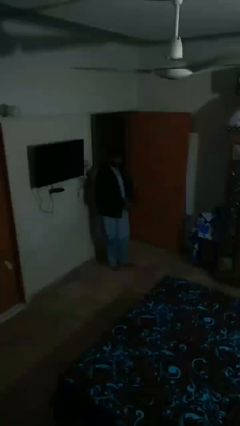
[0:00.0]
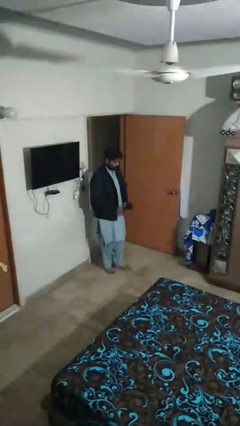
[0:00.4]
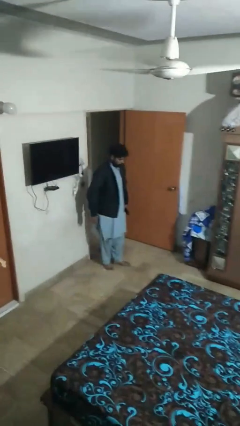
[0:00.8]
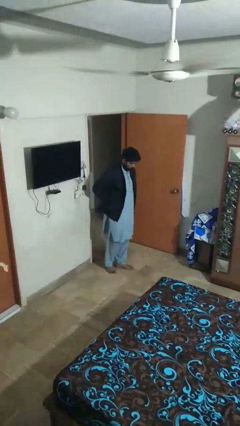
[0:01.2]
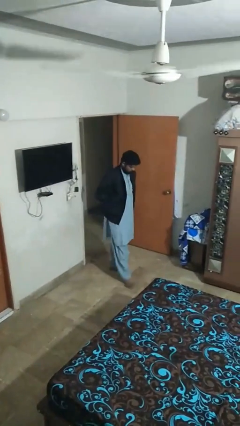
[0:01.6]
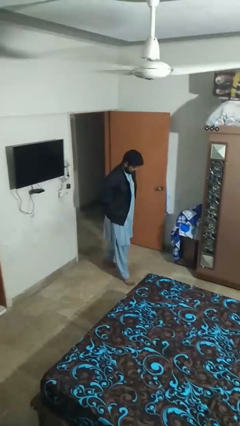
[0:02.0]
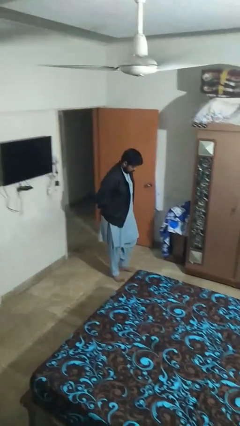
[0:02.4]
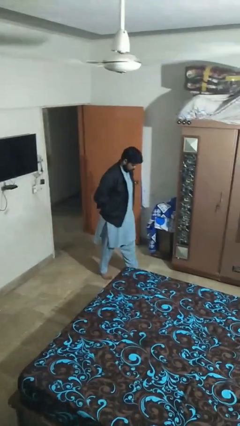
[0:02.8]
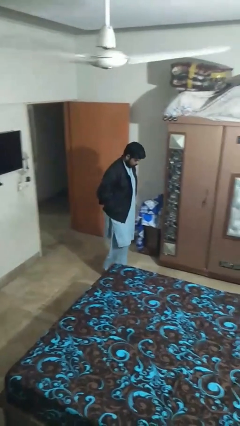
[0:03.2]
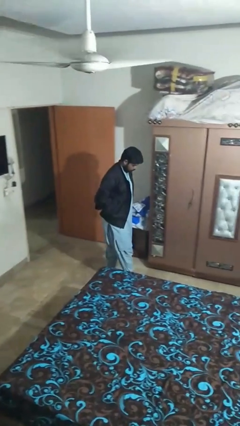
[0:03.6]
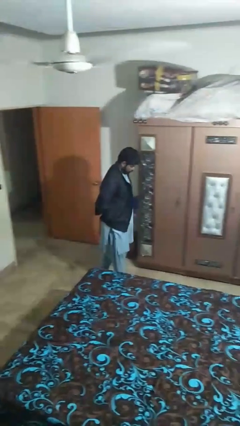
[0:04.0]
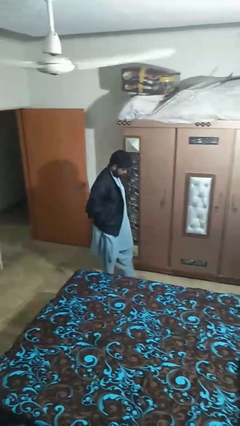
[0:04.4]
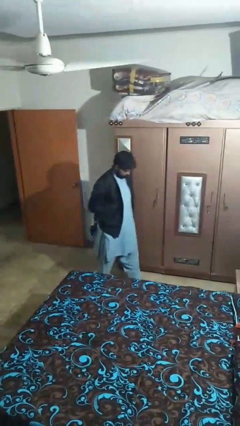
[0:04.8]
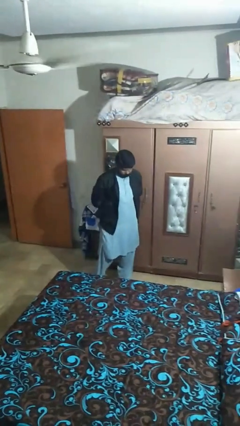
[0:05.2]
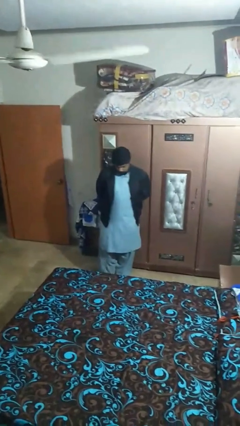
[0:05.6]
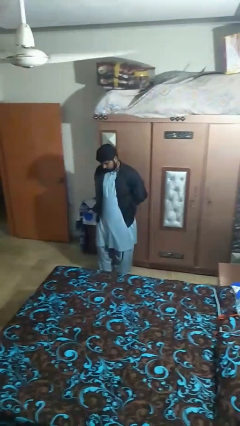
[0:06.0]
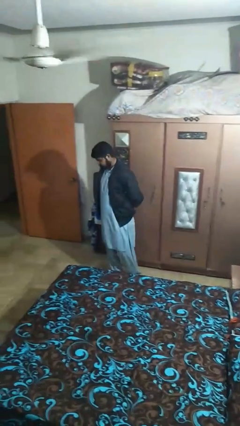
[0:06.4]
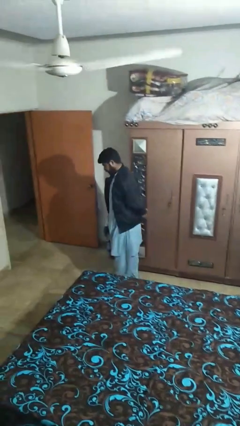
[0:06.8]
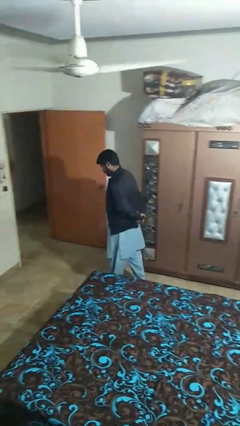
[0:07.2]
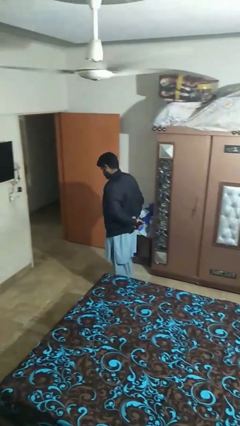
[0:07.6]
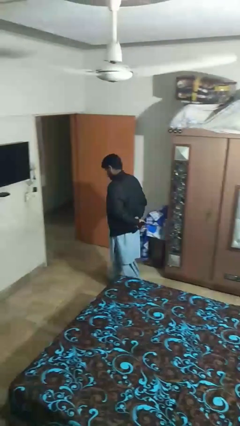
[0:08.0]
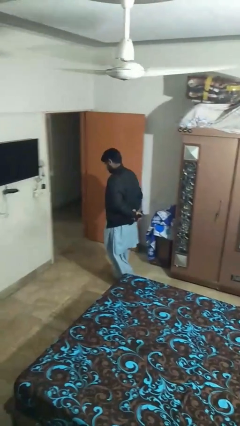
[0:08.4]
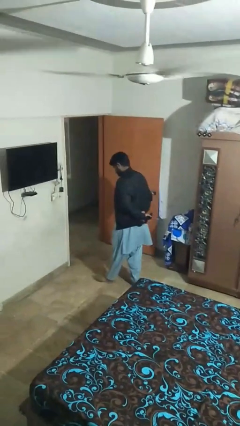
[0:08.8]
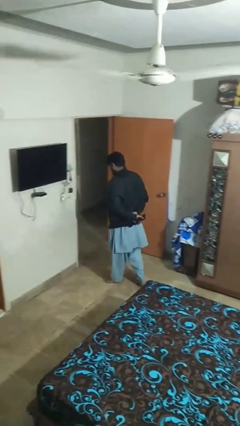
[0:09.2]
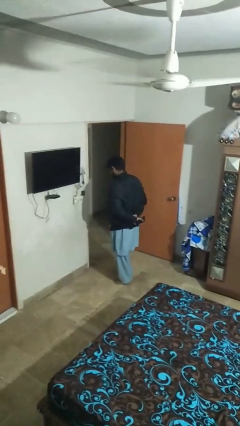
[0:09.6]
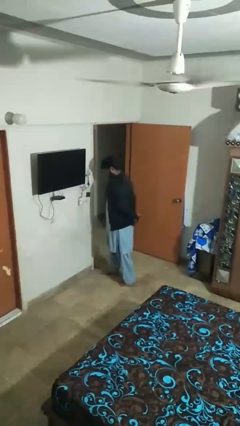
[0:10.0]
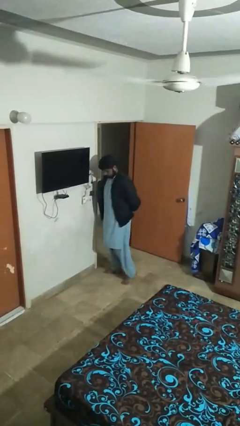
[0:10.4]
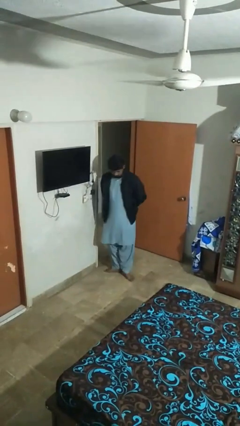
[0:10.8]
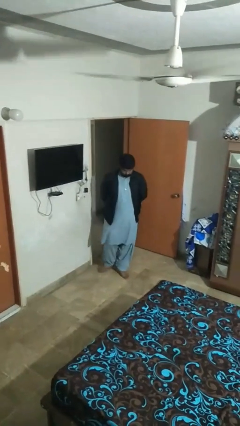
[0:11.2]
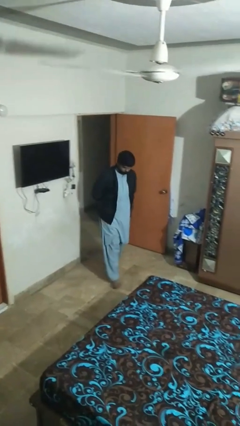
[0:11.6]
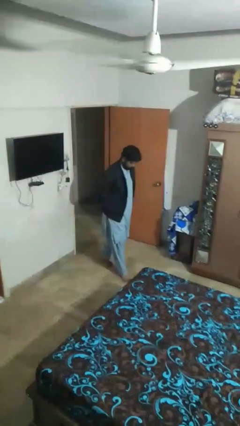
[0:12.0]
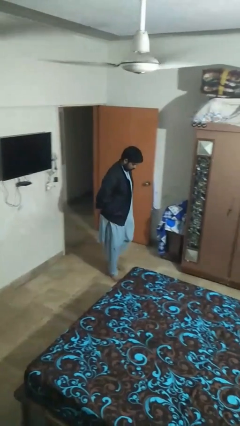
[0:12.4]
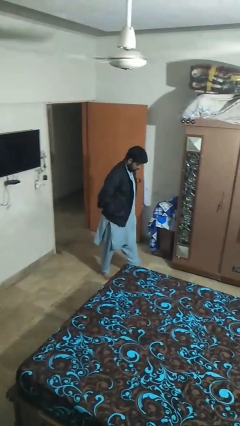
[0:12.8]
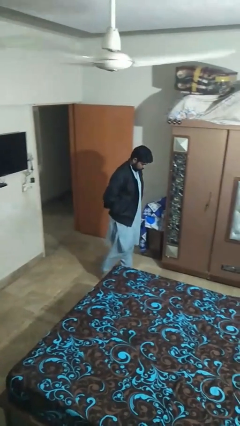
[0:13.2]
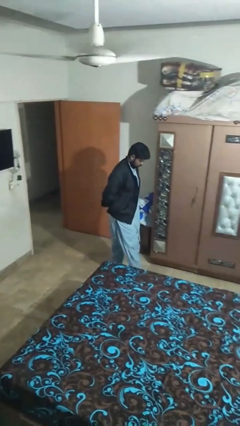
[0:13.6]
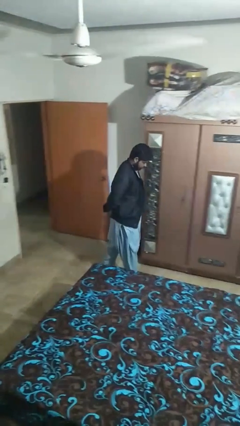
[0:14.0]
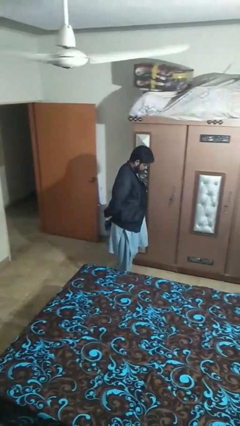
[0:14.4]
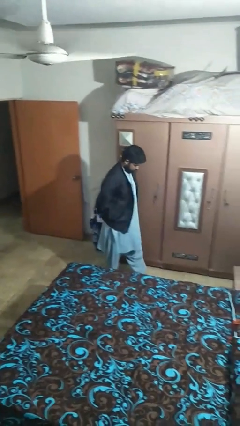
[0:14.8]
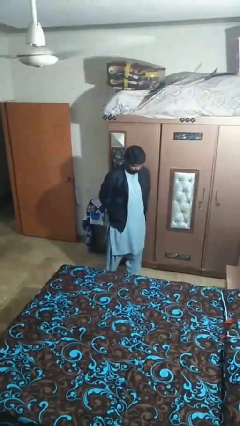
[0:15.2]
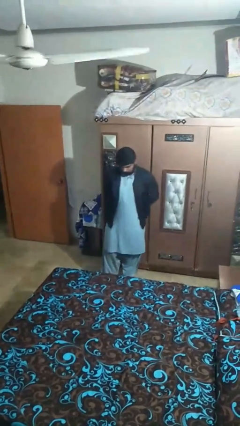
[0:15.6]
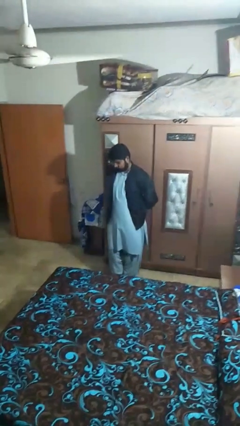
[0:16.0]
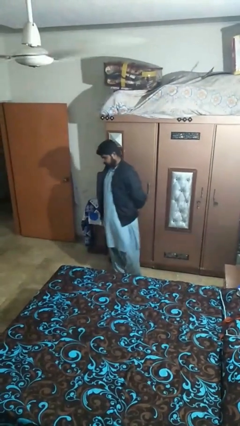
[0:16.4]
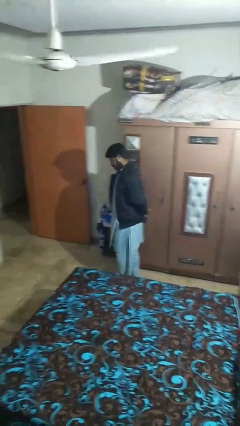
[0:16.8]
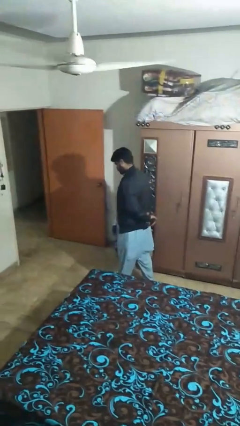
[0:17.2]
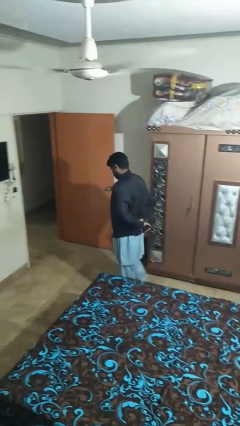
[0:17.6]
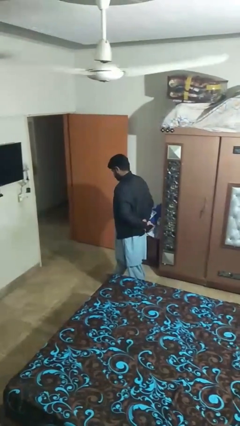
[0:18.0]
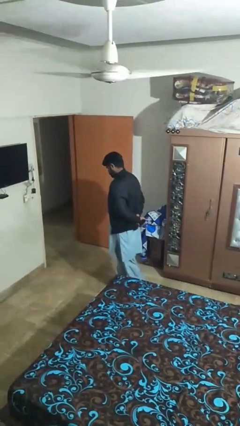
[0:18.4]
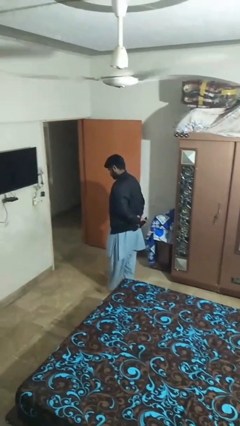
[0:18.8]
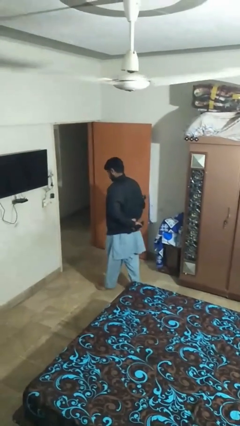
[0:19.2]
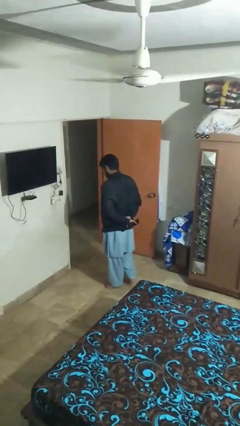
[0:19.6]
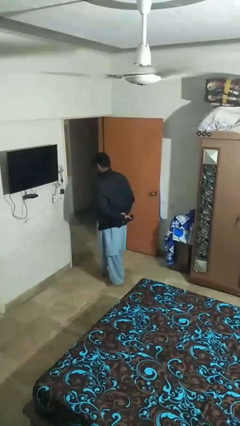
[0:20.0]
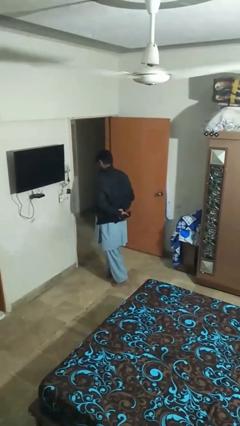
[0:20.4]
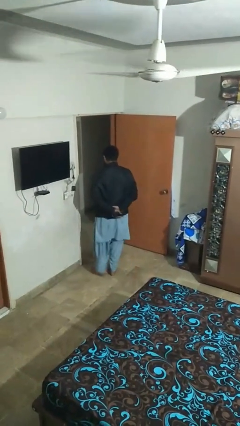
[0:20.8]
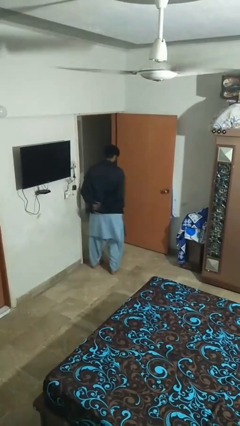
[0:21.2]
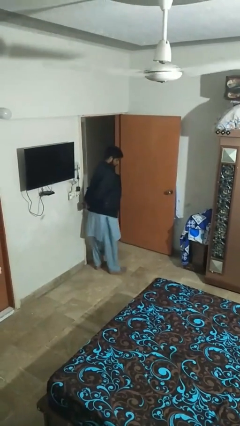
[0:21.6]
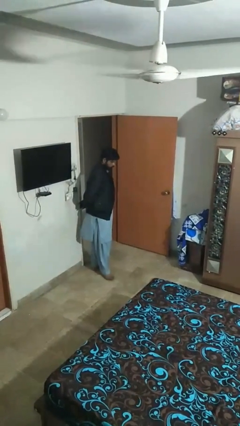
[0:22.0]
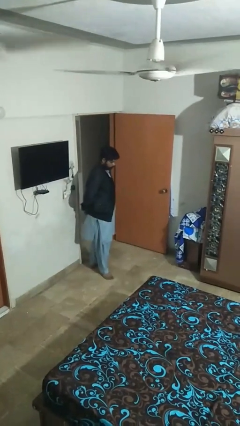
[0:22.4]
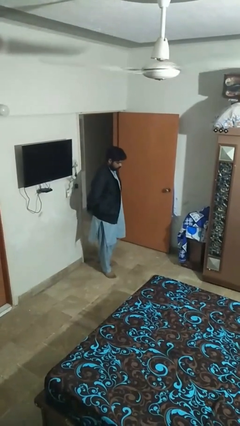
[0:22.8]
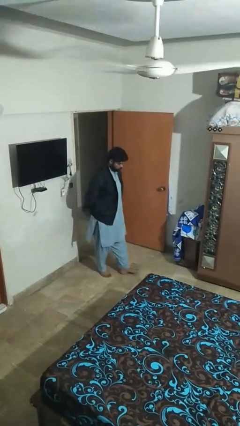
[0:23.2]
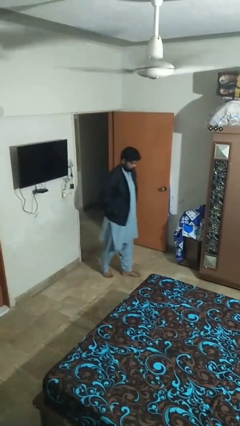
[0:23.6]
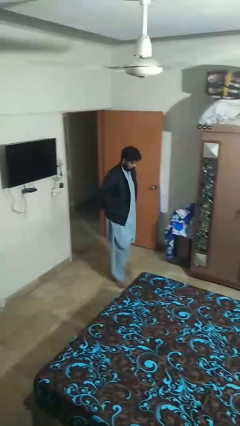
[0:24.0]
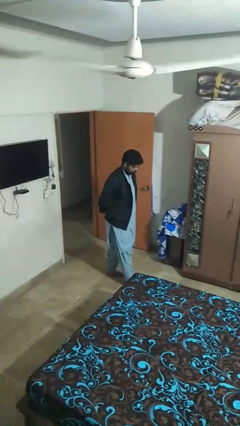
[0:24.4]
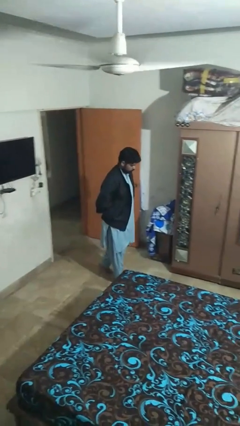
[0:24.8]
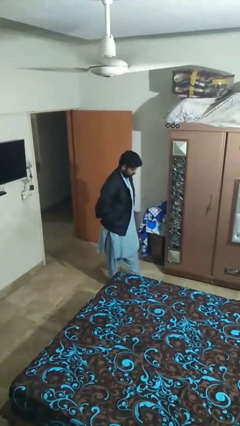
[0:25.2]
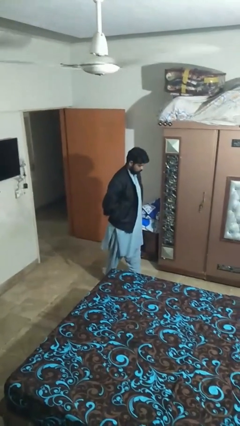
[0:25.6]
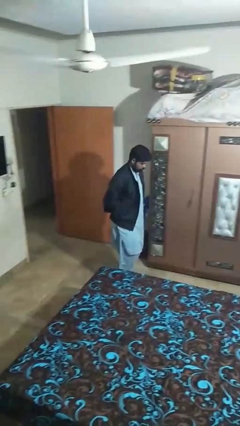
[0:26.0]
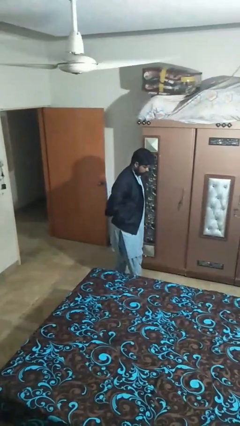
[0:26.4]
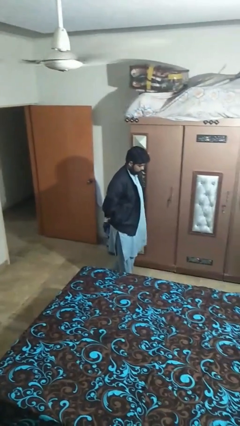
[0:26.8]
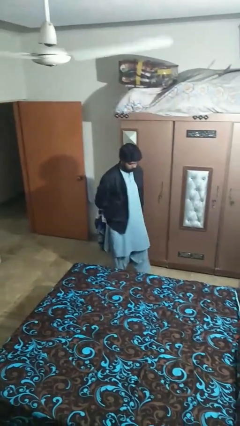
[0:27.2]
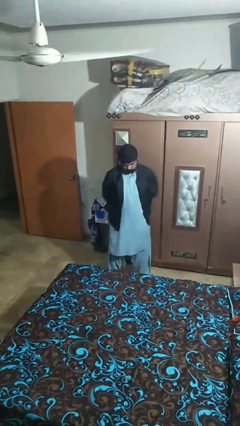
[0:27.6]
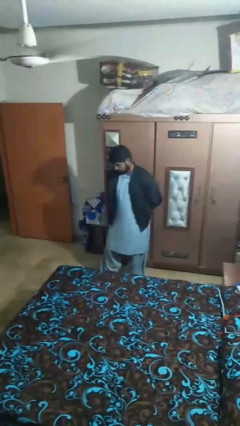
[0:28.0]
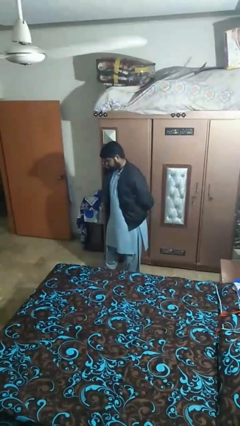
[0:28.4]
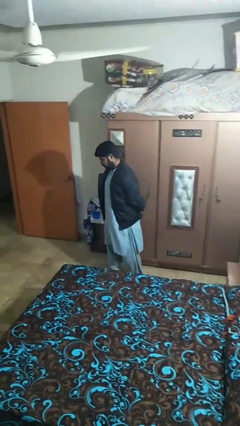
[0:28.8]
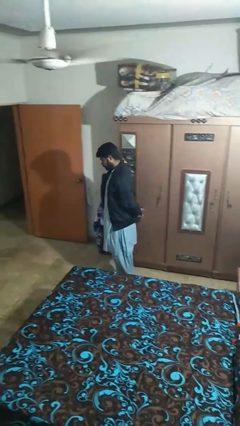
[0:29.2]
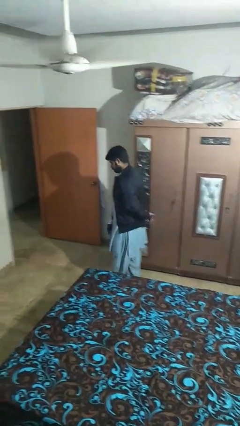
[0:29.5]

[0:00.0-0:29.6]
person walks

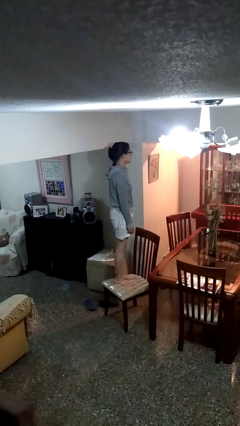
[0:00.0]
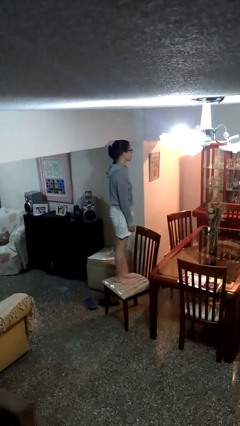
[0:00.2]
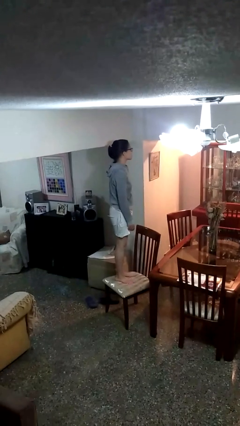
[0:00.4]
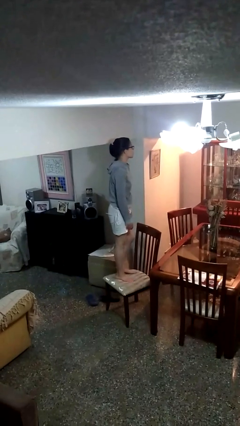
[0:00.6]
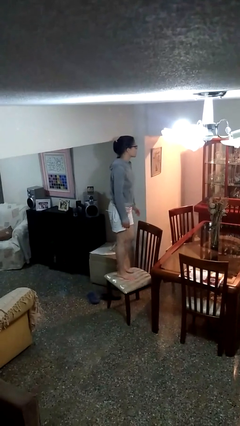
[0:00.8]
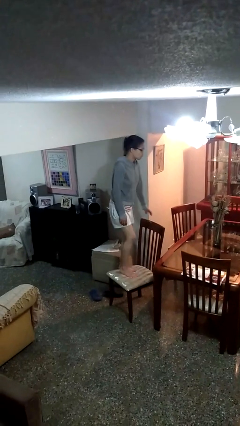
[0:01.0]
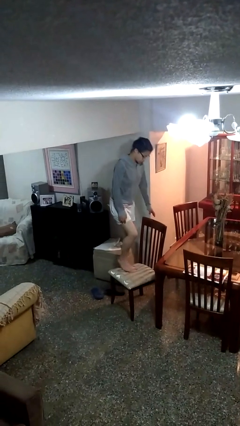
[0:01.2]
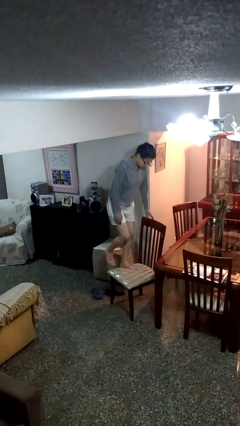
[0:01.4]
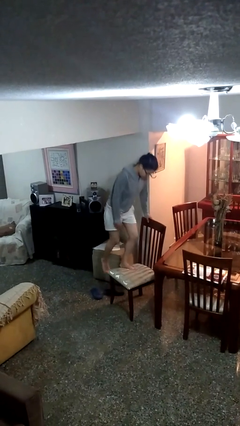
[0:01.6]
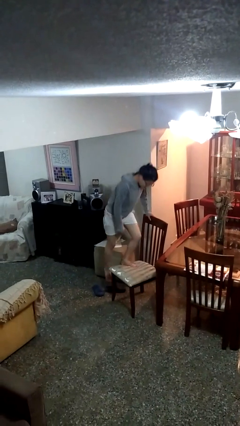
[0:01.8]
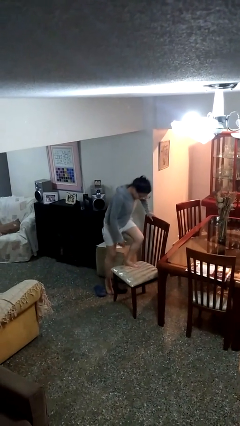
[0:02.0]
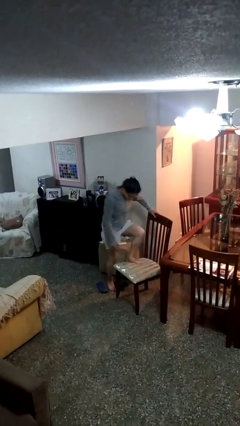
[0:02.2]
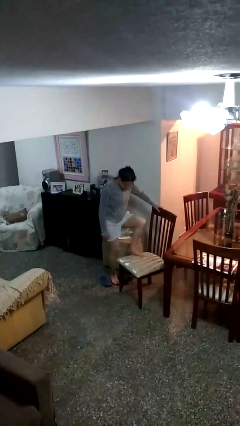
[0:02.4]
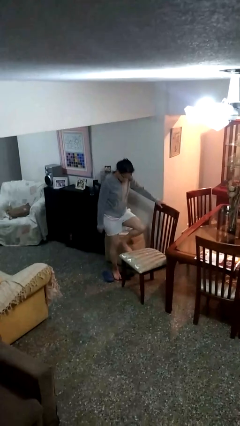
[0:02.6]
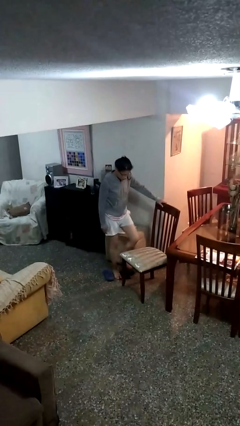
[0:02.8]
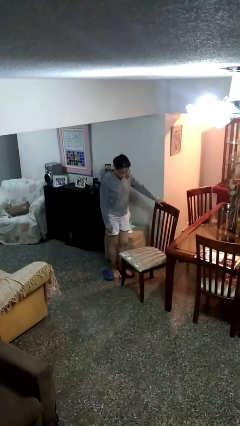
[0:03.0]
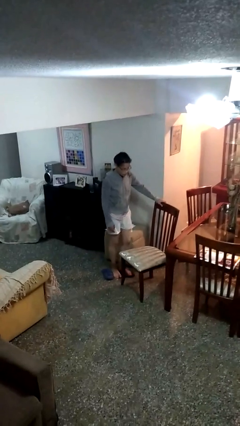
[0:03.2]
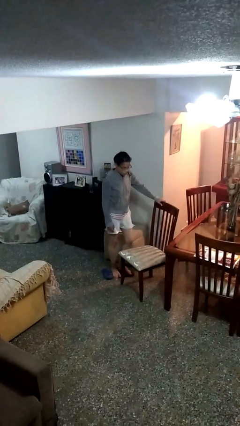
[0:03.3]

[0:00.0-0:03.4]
person climbs off chair
